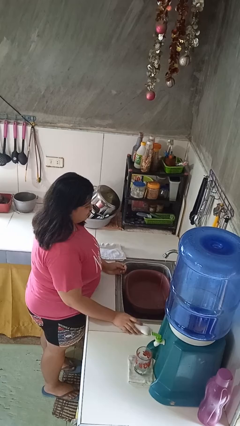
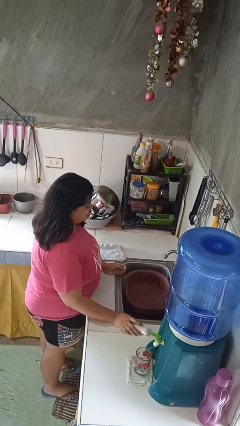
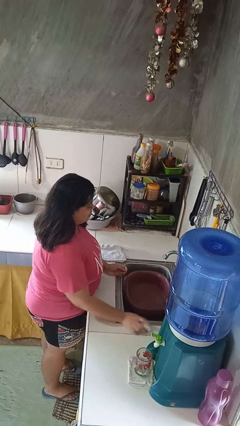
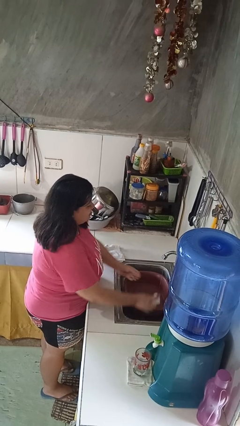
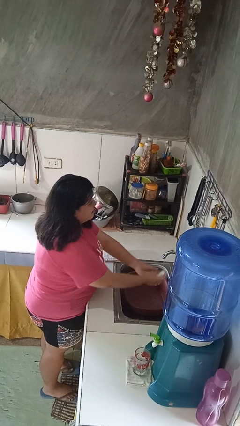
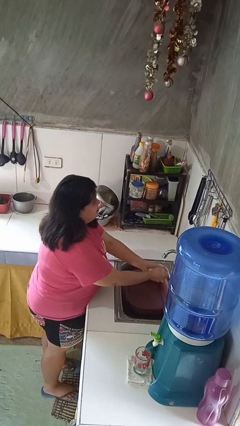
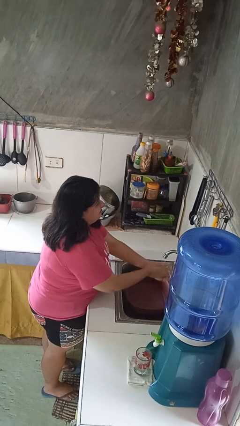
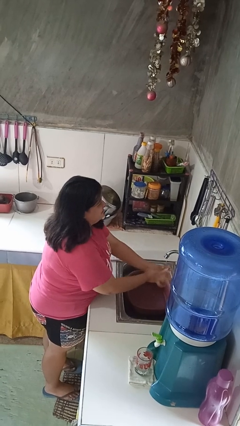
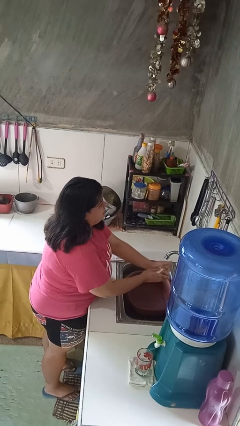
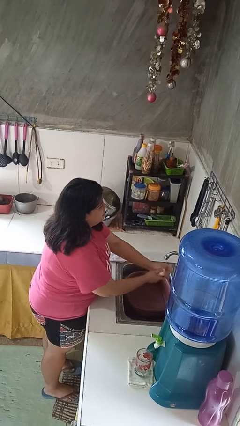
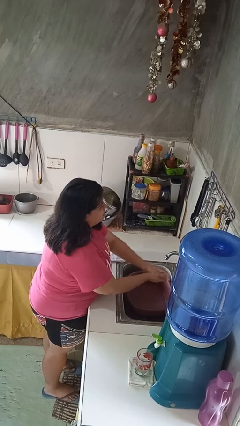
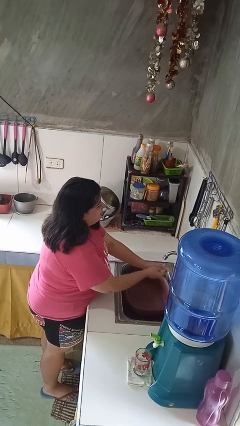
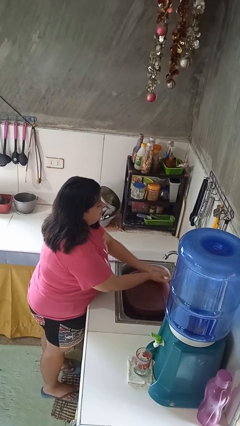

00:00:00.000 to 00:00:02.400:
person washes hands

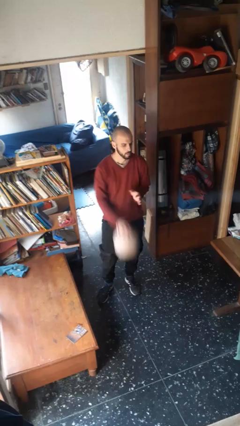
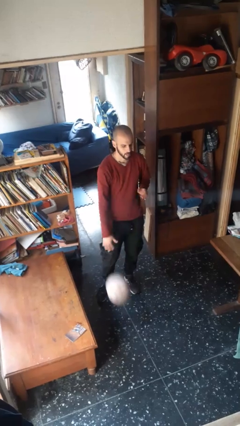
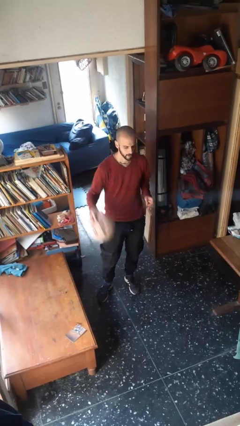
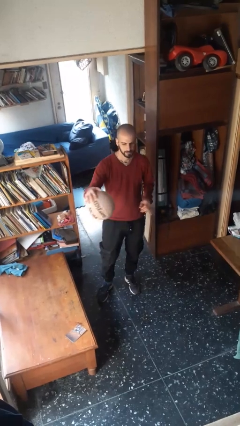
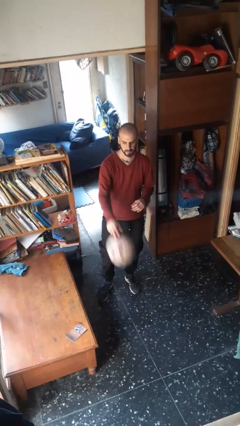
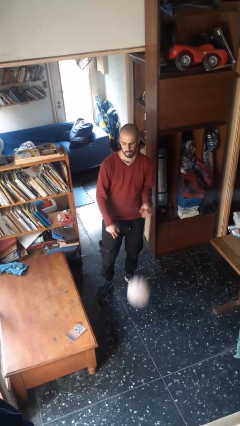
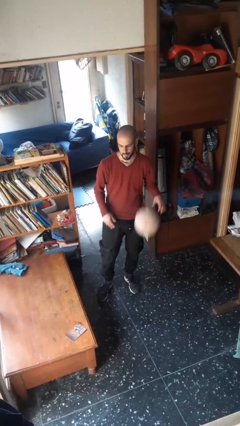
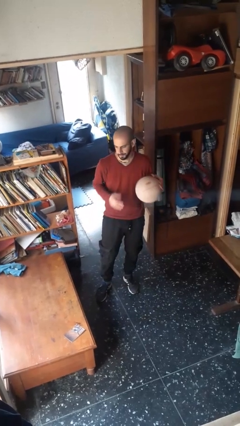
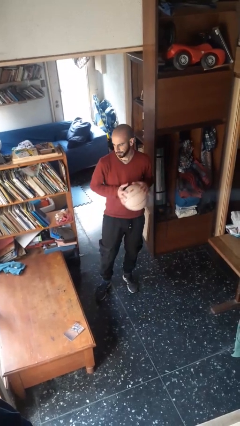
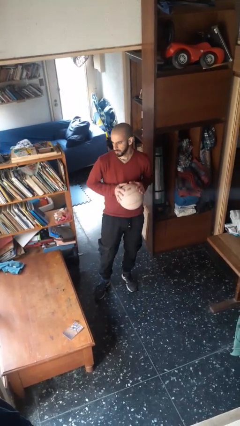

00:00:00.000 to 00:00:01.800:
person bounces ball on floor

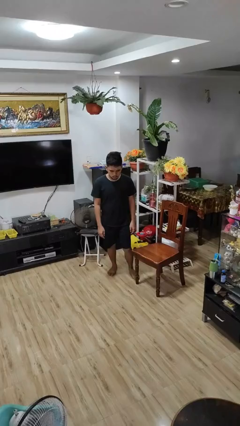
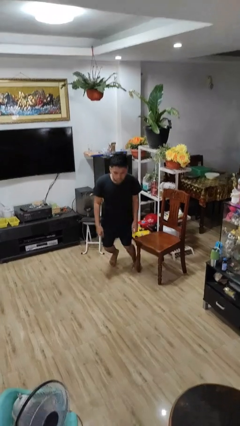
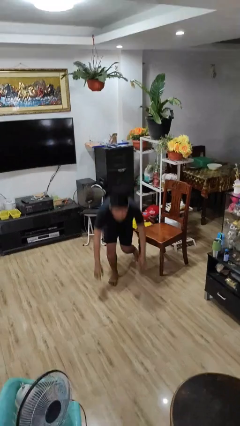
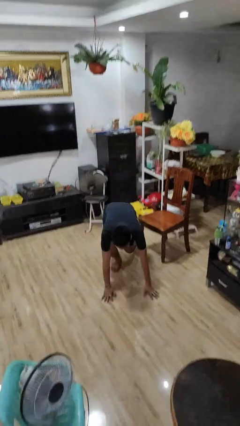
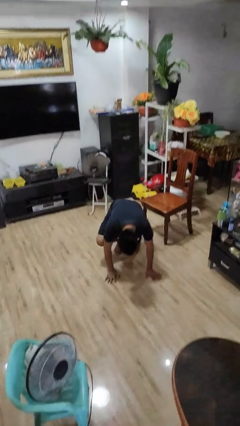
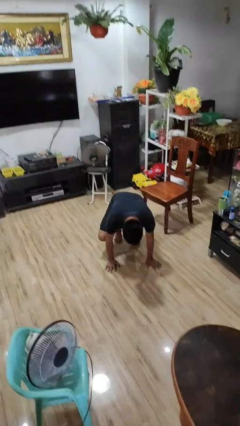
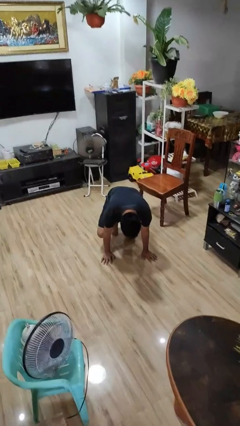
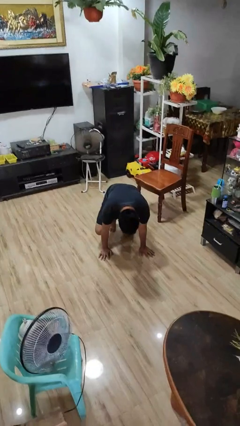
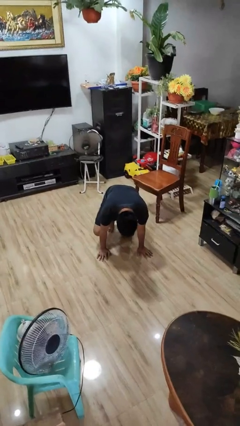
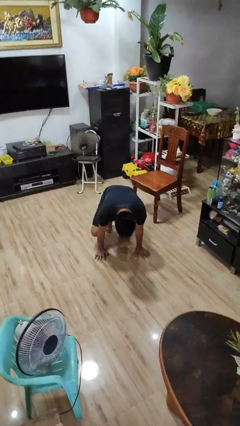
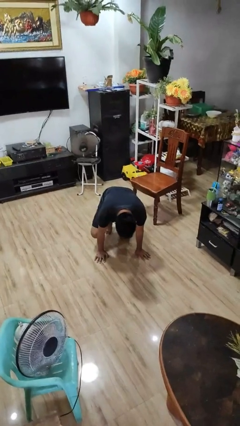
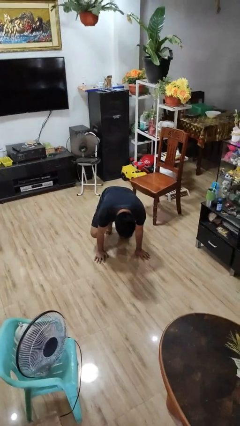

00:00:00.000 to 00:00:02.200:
person trips on object on floor

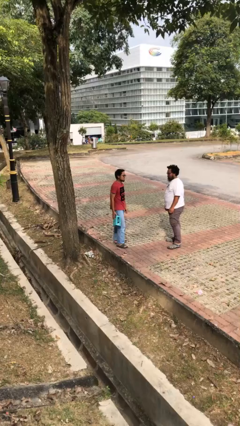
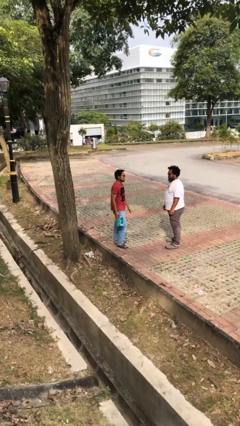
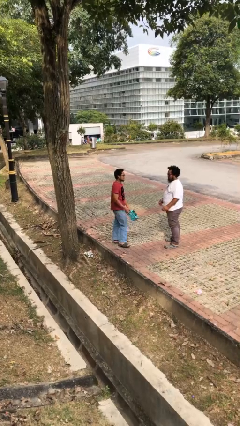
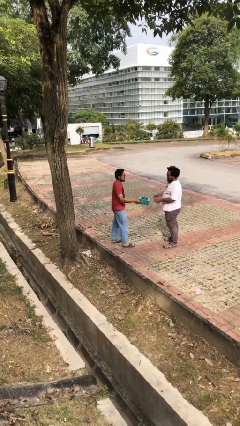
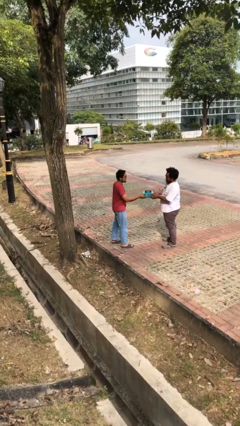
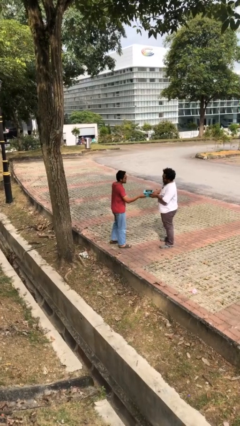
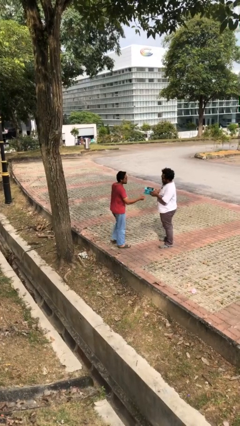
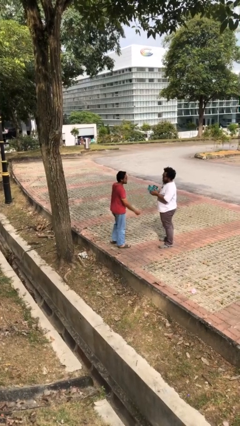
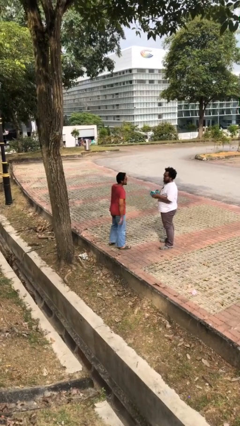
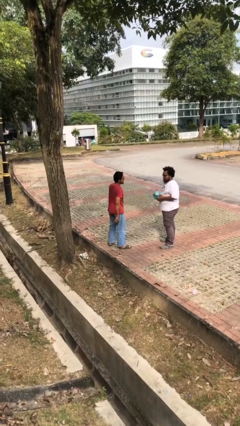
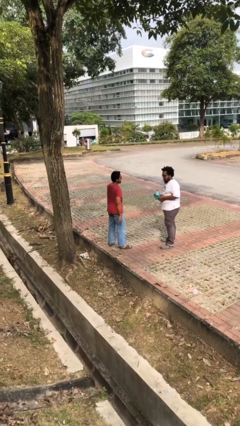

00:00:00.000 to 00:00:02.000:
person transfers object to person

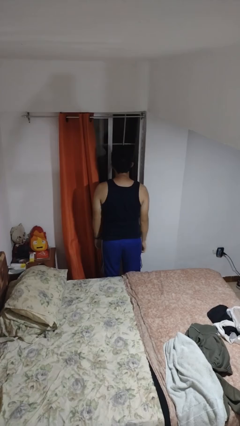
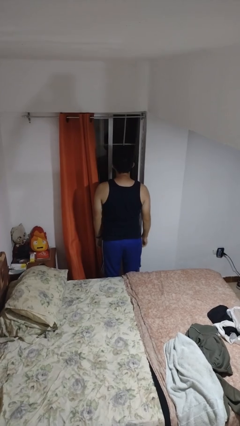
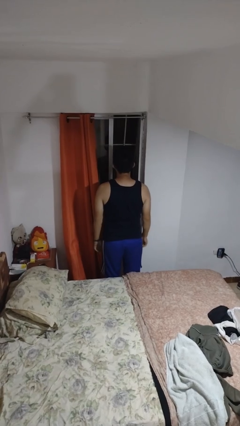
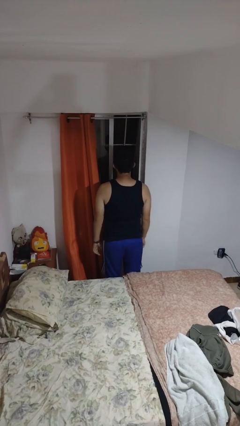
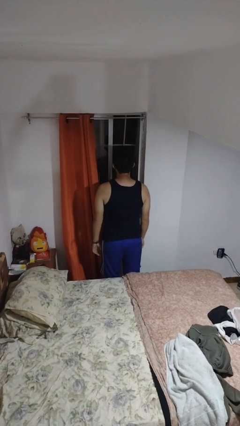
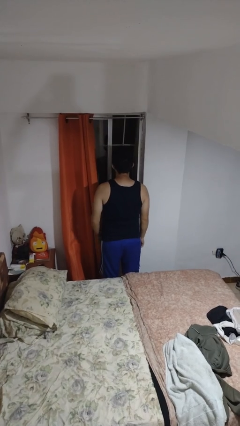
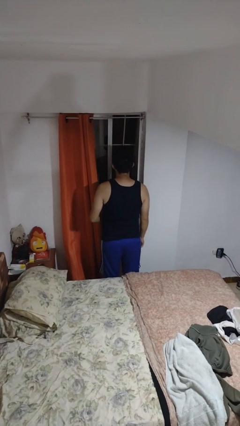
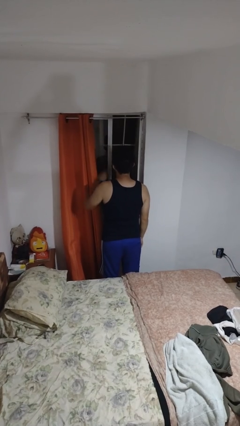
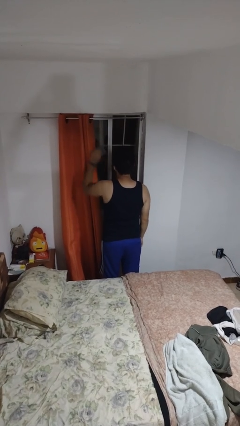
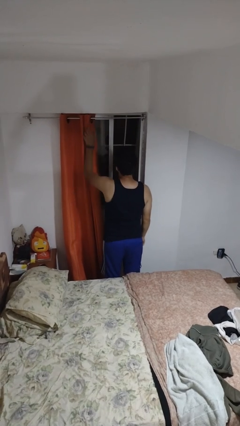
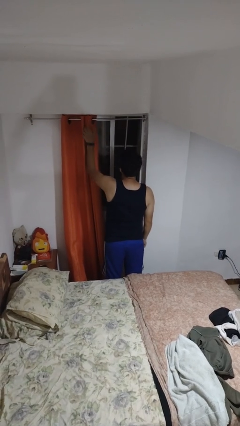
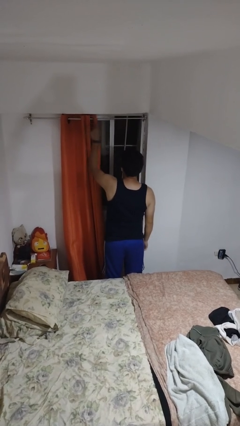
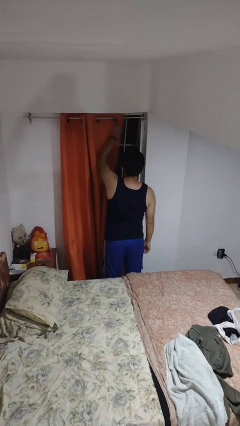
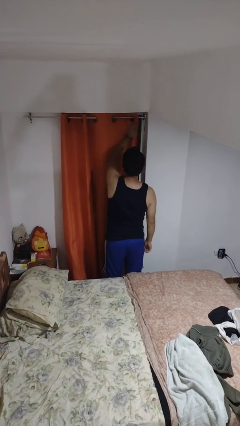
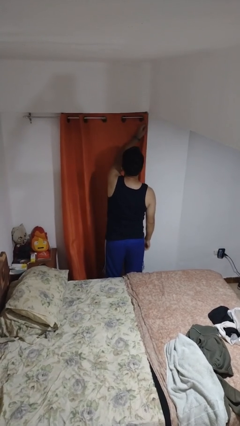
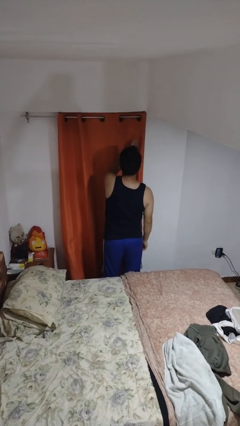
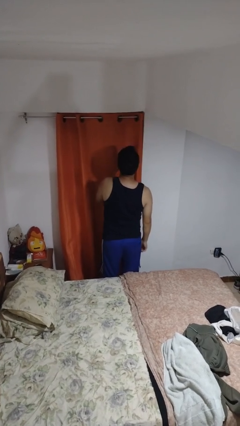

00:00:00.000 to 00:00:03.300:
person closes curtains

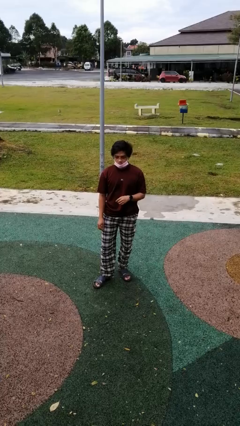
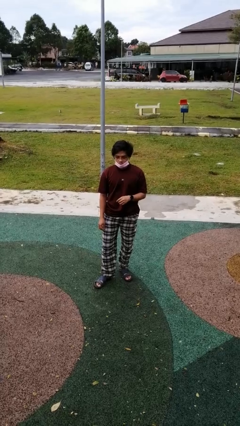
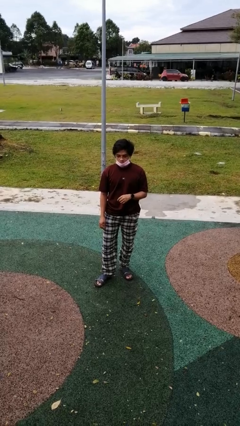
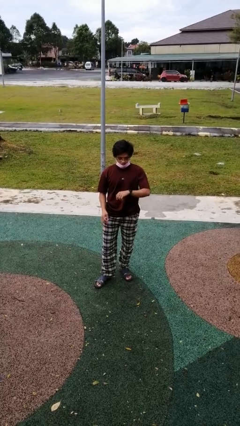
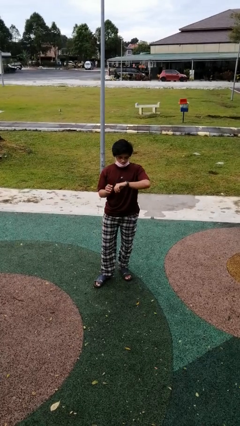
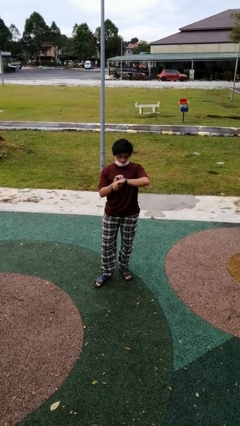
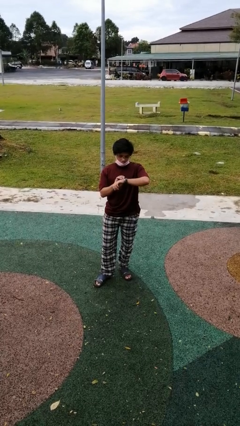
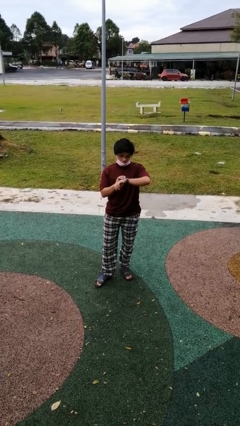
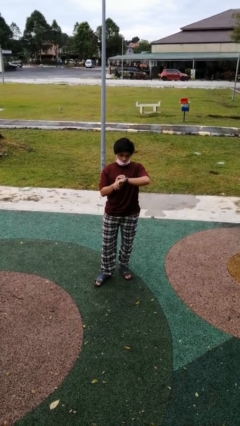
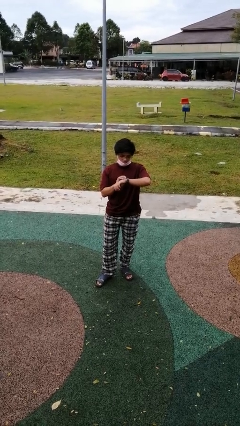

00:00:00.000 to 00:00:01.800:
person looks at wristwatch

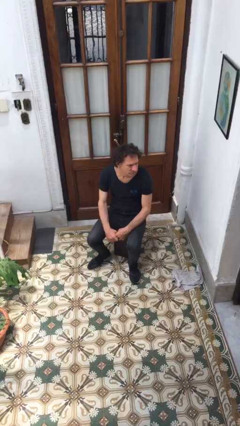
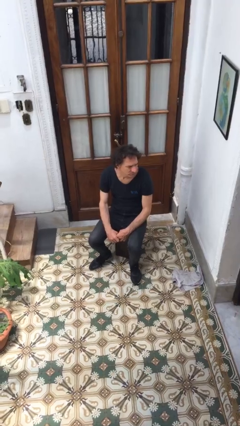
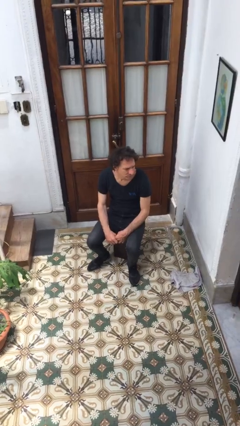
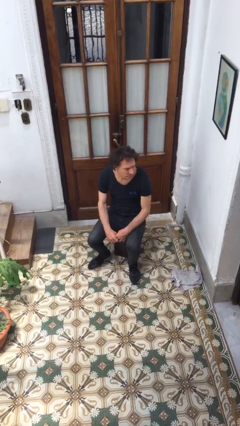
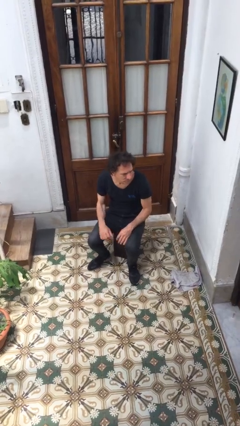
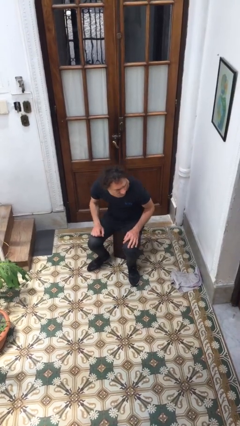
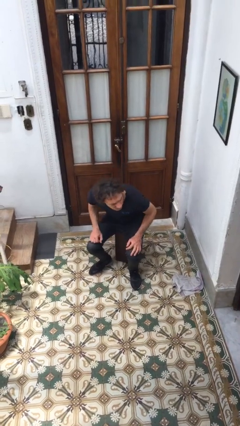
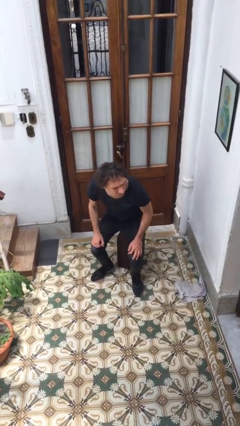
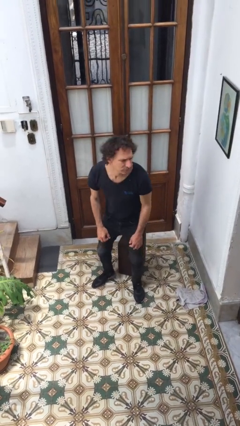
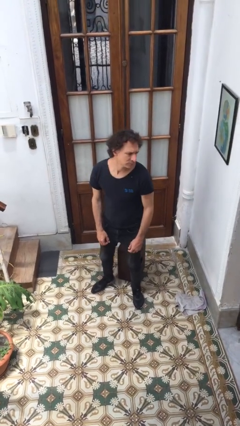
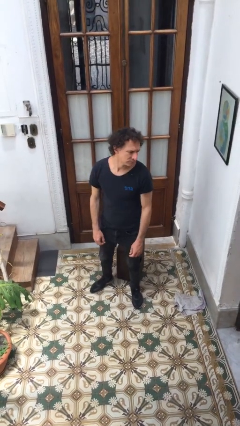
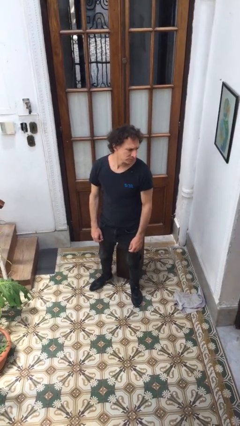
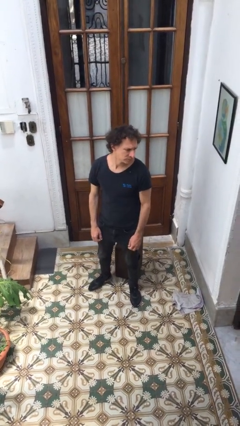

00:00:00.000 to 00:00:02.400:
person stands up

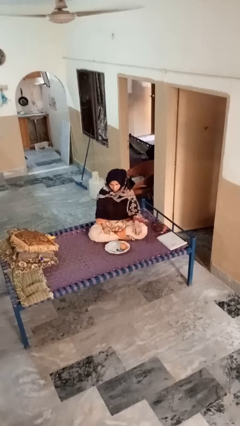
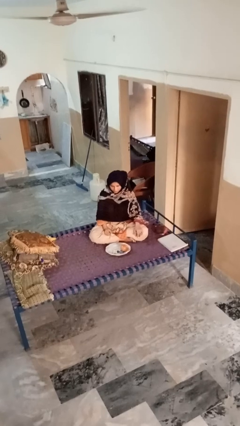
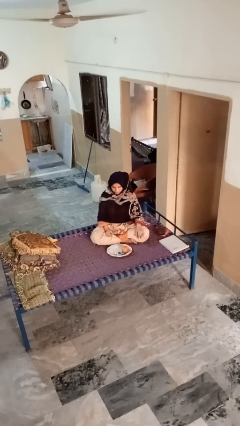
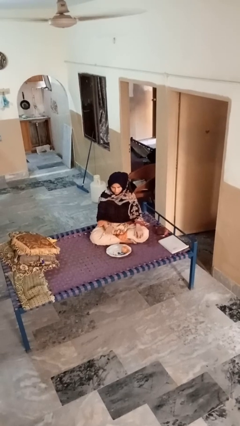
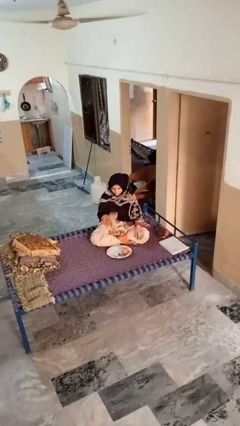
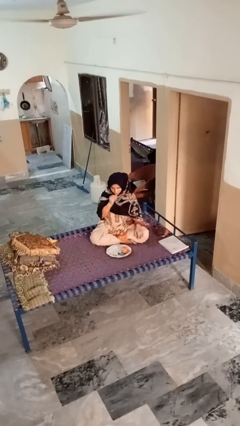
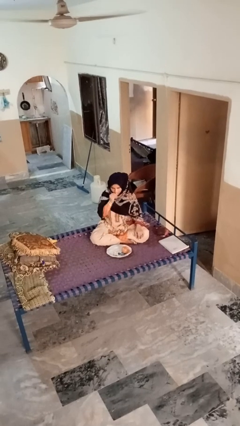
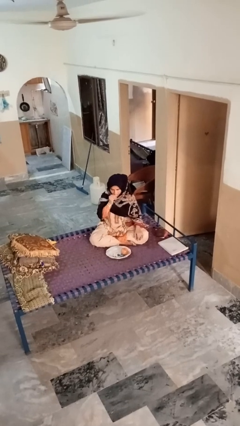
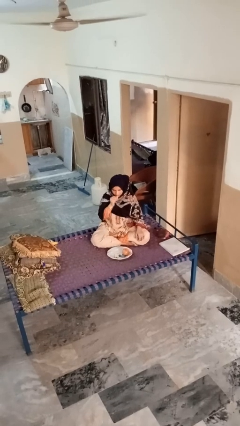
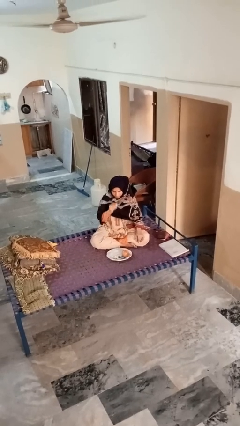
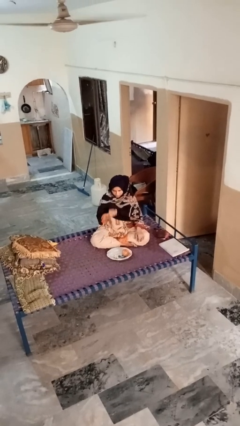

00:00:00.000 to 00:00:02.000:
person eats apple
